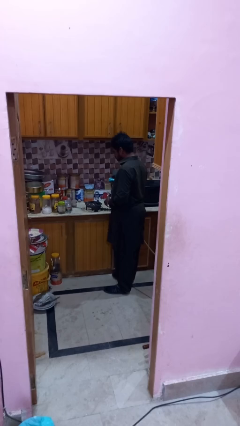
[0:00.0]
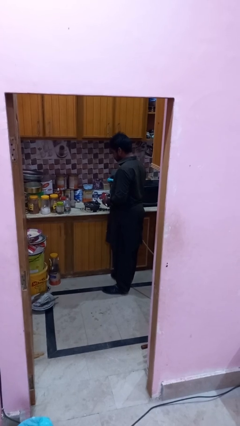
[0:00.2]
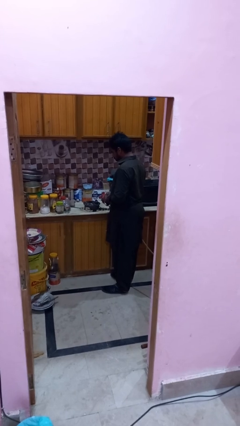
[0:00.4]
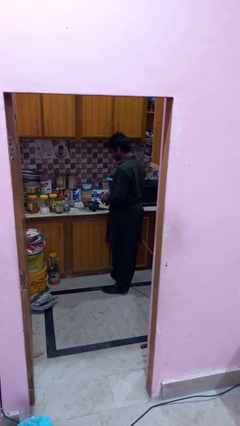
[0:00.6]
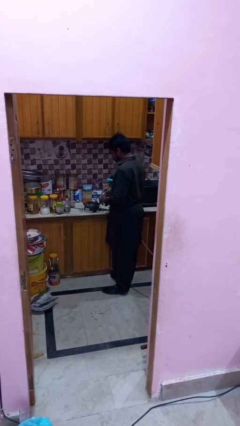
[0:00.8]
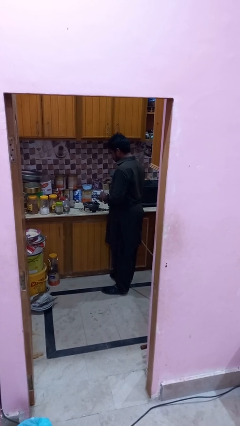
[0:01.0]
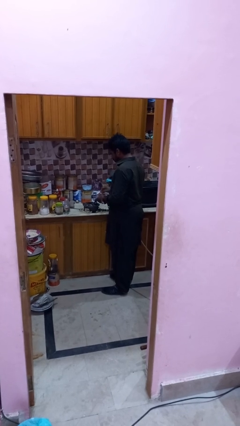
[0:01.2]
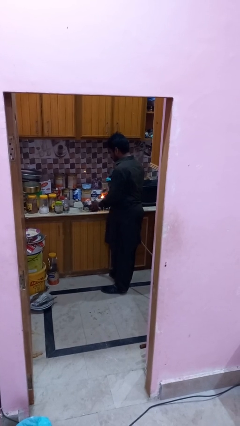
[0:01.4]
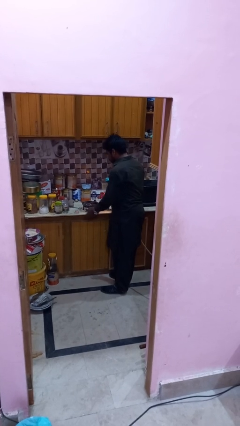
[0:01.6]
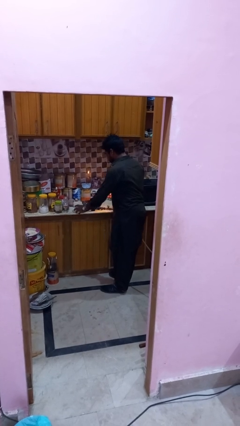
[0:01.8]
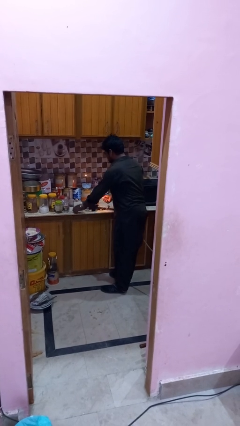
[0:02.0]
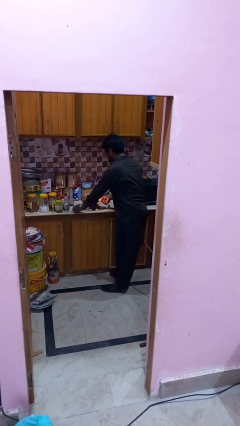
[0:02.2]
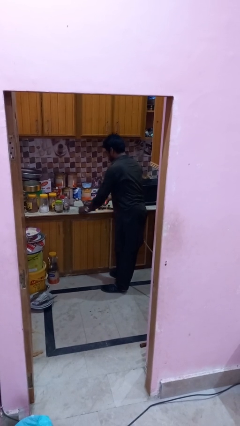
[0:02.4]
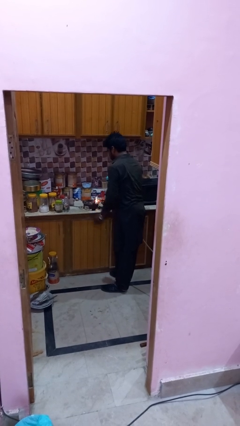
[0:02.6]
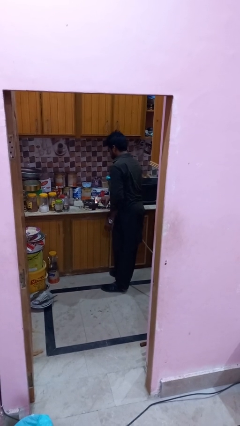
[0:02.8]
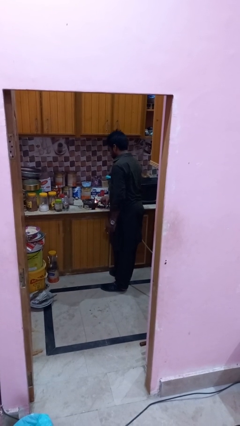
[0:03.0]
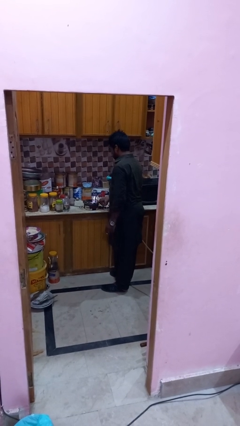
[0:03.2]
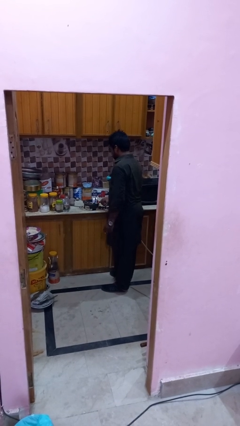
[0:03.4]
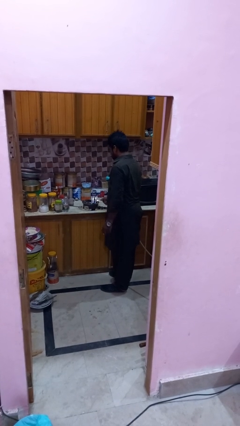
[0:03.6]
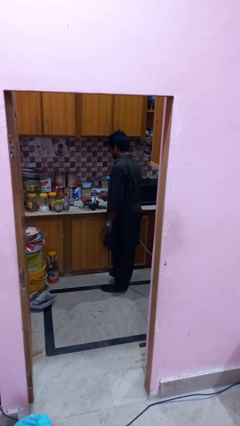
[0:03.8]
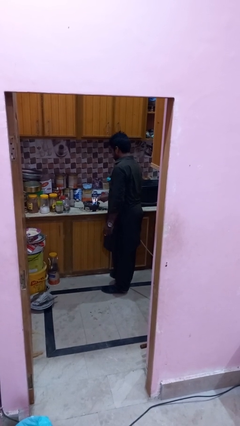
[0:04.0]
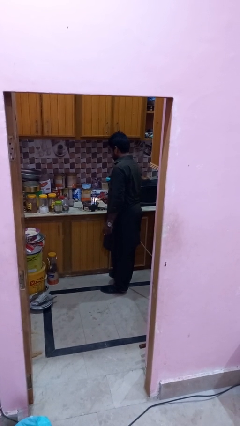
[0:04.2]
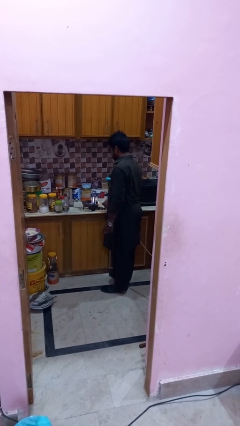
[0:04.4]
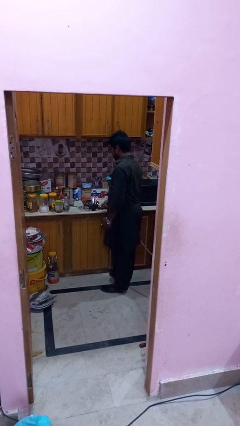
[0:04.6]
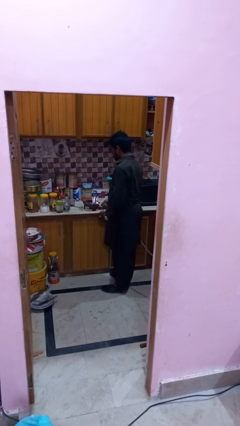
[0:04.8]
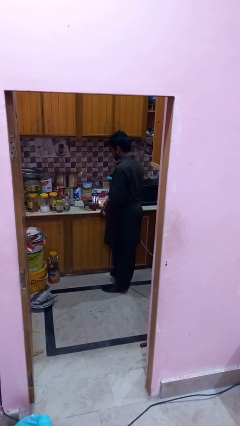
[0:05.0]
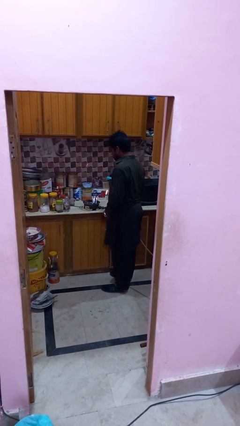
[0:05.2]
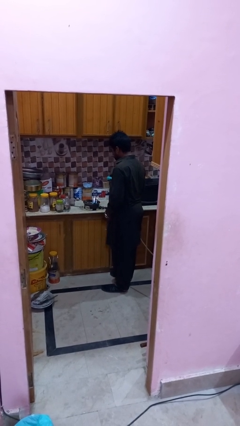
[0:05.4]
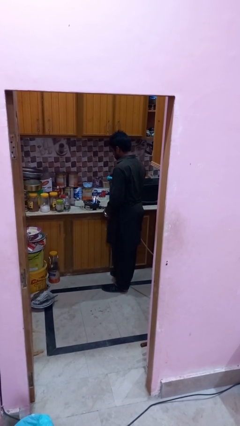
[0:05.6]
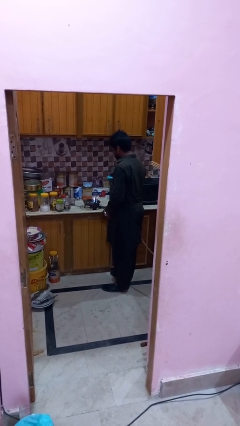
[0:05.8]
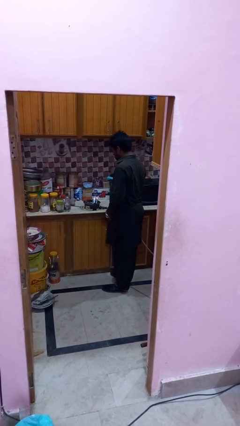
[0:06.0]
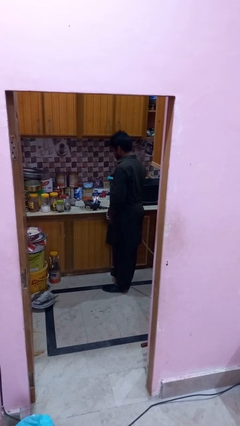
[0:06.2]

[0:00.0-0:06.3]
person turns on stovetop

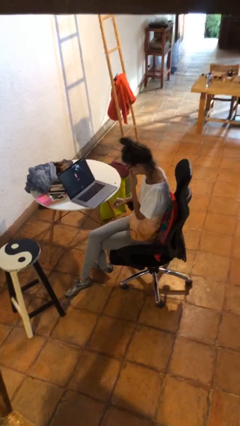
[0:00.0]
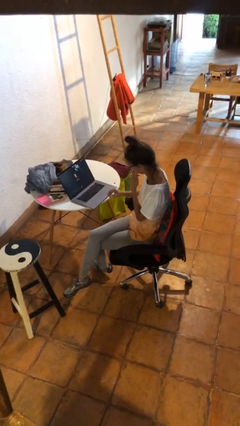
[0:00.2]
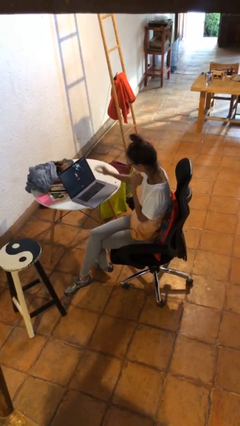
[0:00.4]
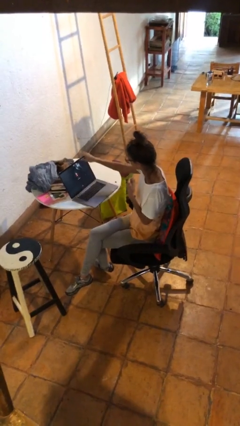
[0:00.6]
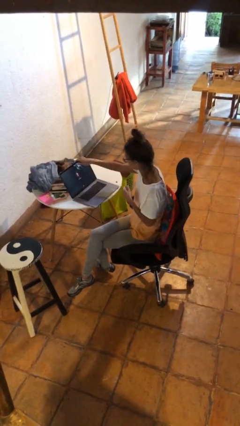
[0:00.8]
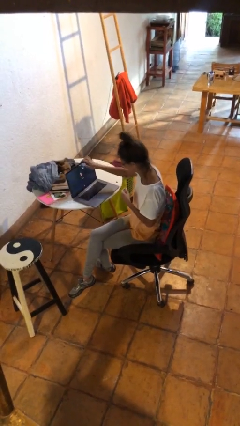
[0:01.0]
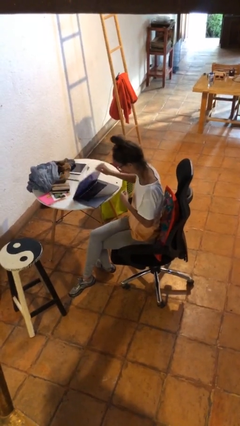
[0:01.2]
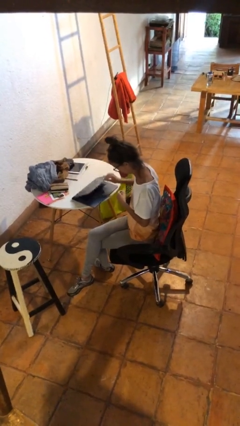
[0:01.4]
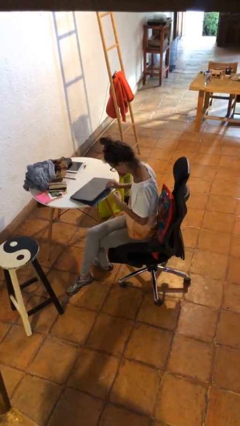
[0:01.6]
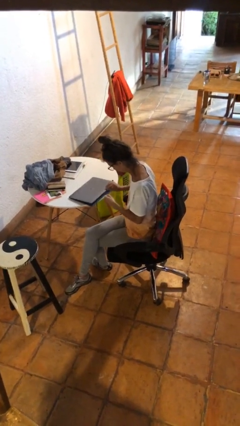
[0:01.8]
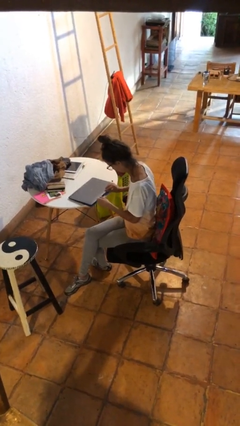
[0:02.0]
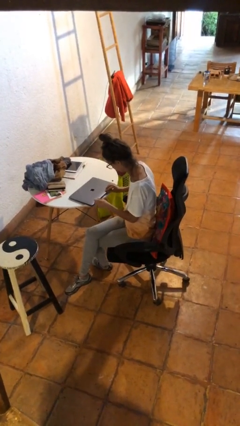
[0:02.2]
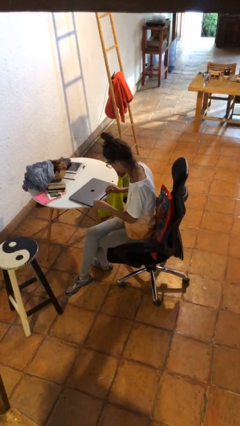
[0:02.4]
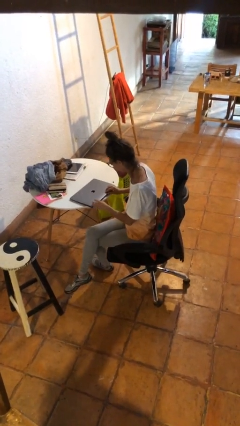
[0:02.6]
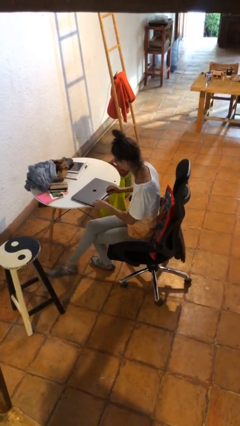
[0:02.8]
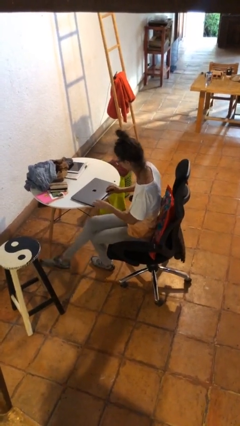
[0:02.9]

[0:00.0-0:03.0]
person closes laptop

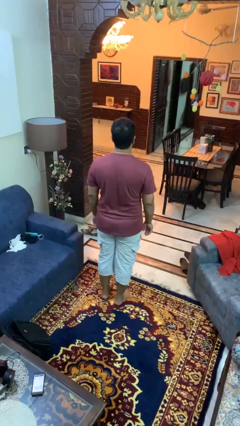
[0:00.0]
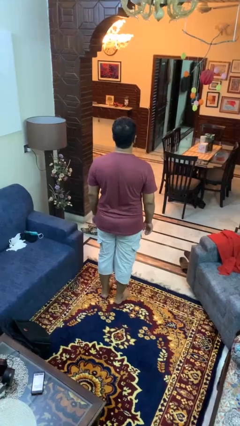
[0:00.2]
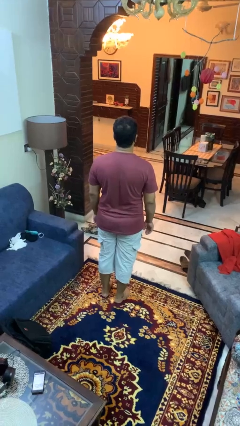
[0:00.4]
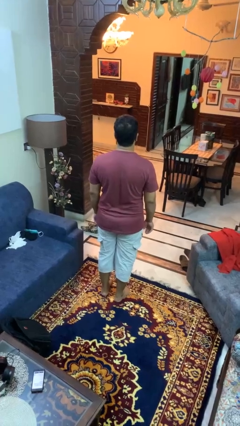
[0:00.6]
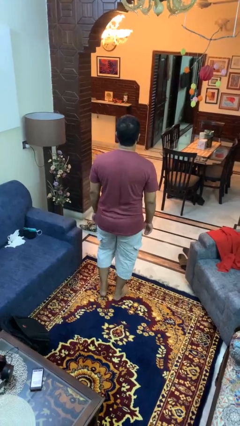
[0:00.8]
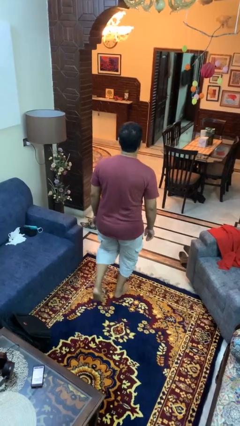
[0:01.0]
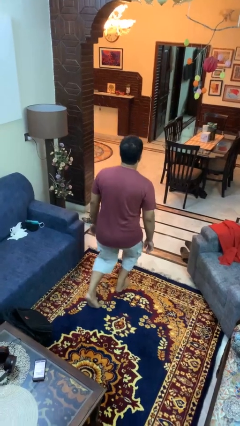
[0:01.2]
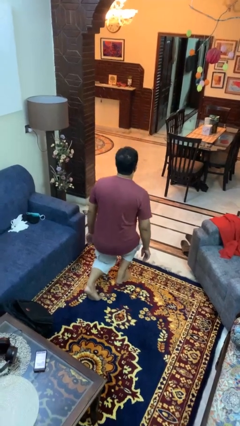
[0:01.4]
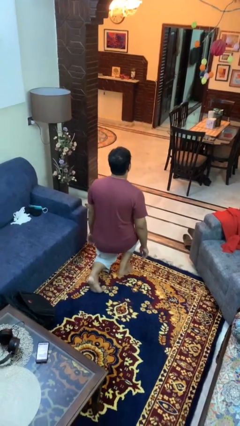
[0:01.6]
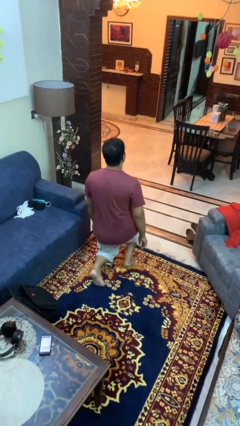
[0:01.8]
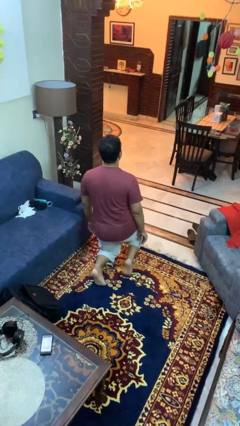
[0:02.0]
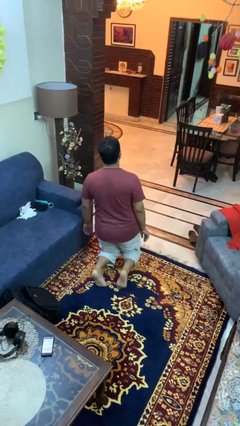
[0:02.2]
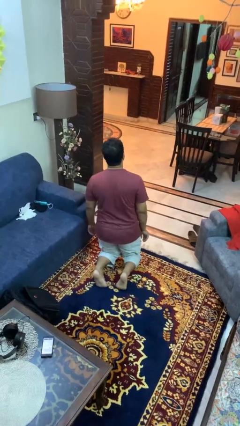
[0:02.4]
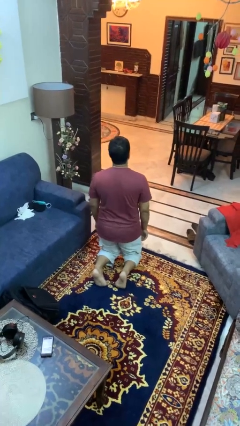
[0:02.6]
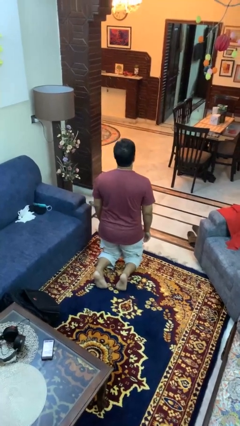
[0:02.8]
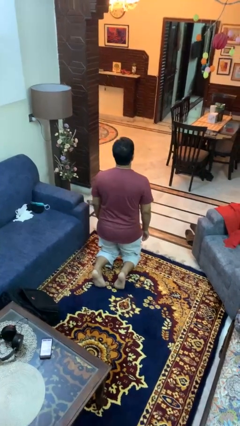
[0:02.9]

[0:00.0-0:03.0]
person kneels

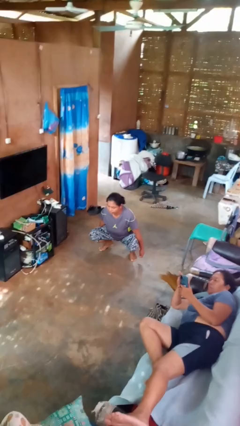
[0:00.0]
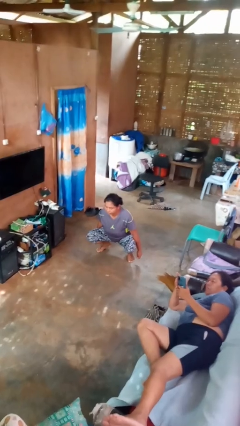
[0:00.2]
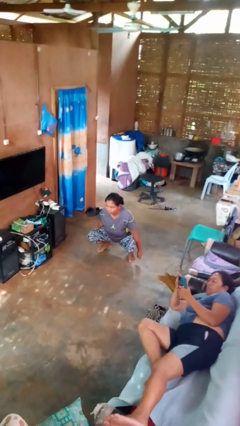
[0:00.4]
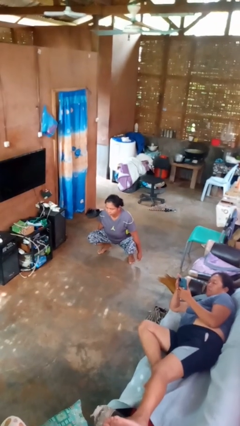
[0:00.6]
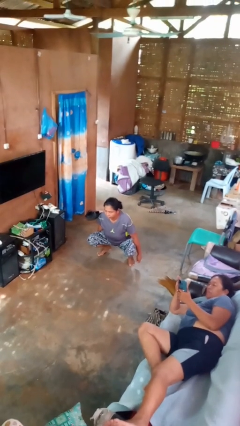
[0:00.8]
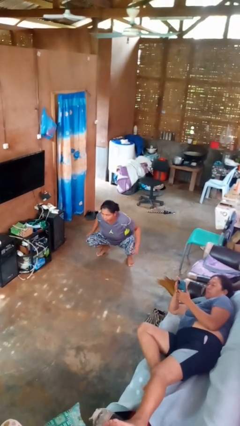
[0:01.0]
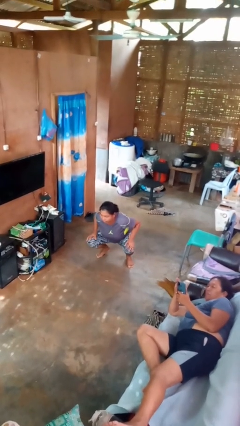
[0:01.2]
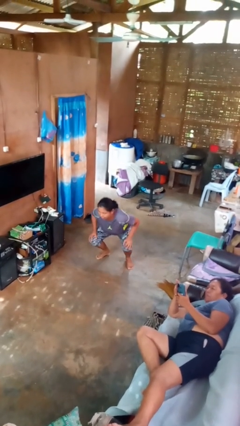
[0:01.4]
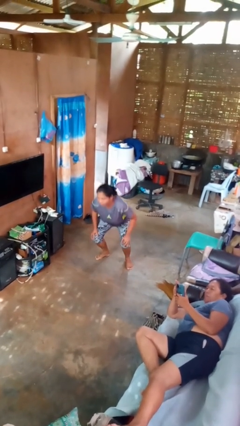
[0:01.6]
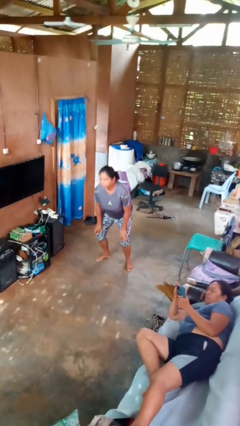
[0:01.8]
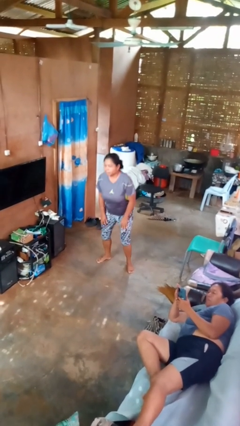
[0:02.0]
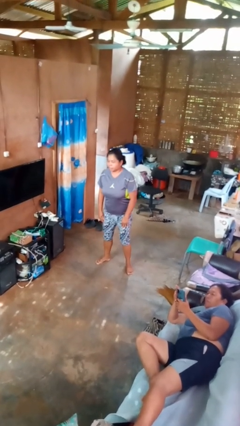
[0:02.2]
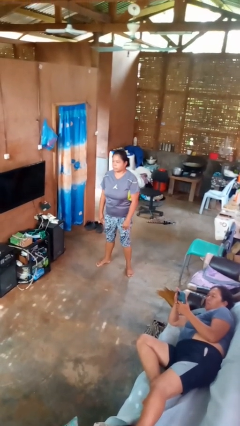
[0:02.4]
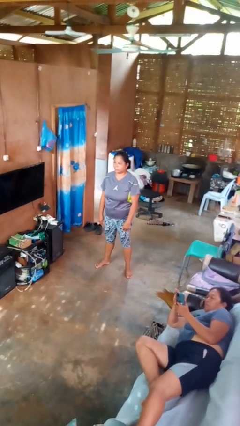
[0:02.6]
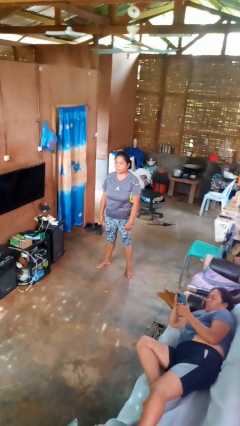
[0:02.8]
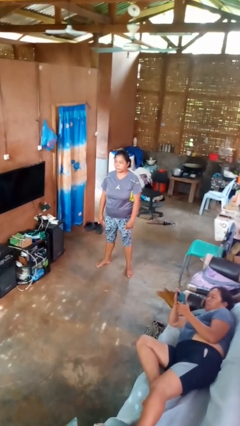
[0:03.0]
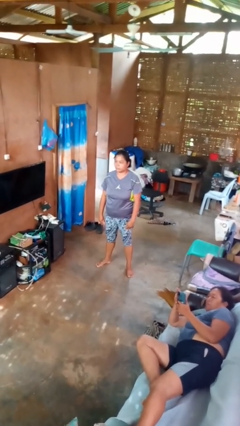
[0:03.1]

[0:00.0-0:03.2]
person stands up

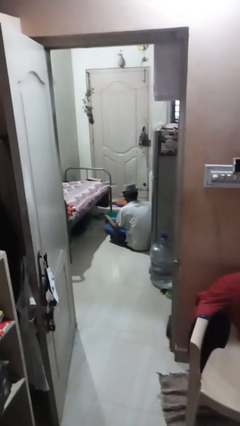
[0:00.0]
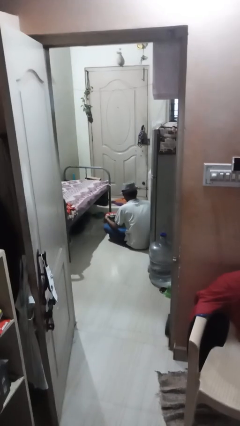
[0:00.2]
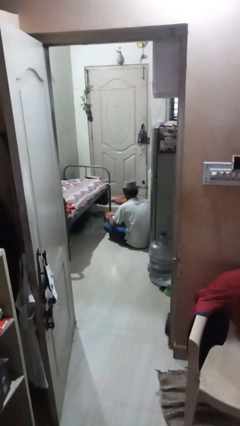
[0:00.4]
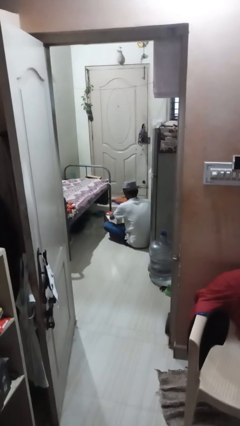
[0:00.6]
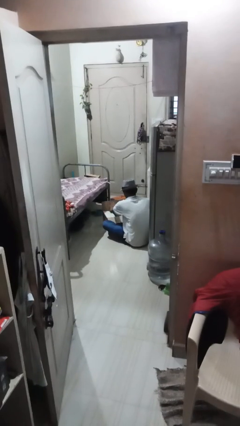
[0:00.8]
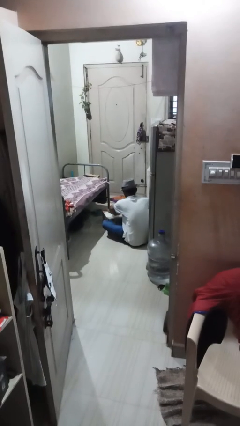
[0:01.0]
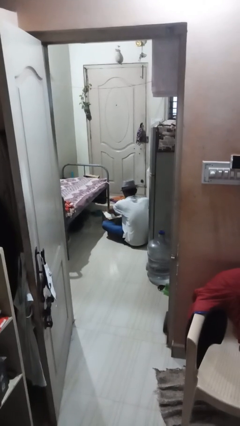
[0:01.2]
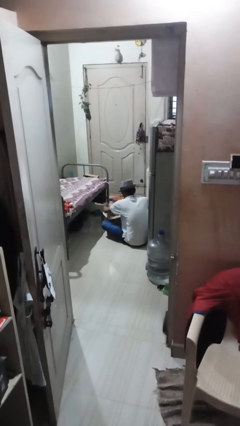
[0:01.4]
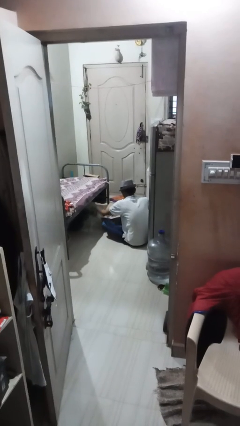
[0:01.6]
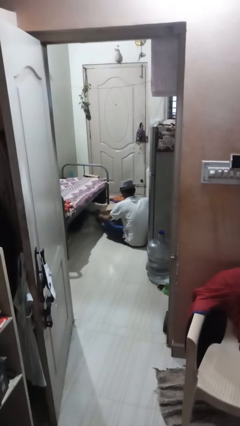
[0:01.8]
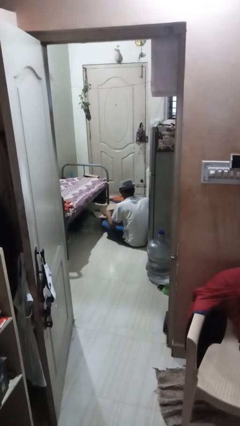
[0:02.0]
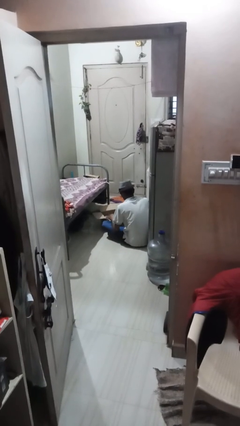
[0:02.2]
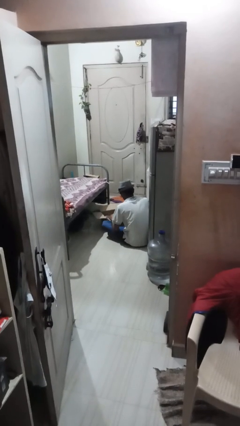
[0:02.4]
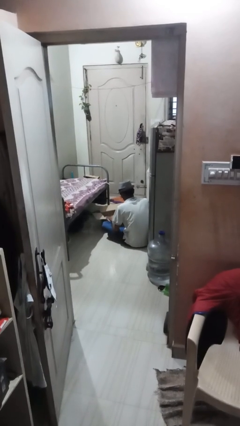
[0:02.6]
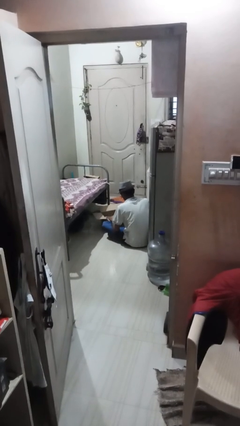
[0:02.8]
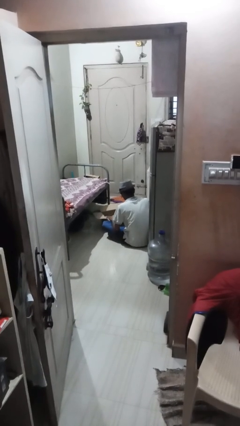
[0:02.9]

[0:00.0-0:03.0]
person opens box
